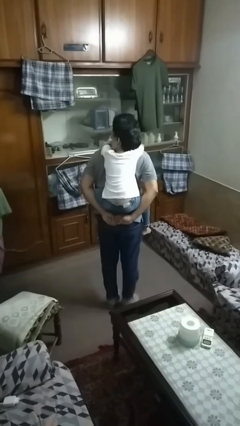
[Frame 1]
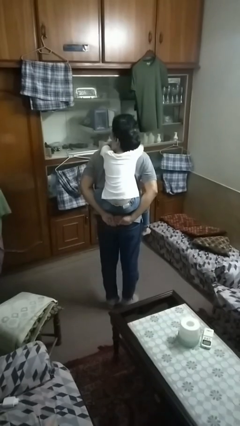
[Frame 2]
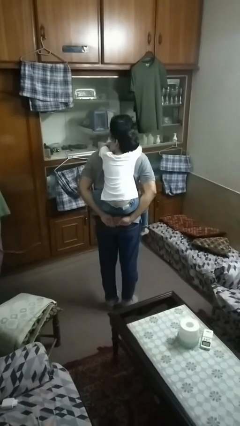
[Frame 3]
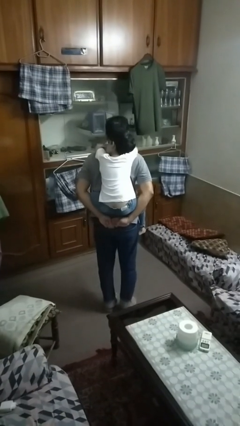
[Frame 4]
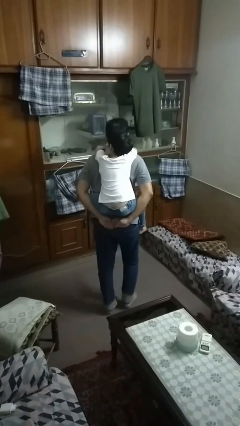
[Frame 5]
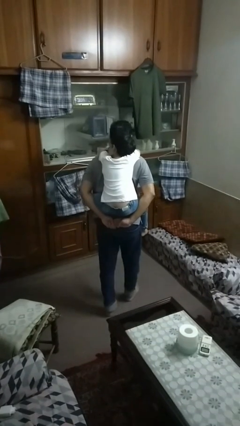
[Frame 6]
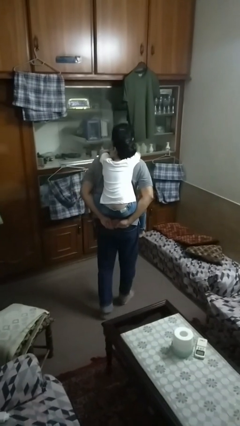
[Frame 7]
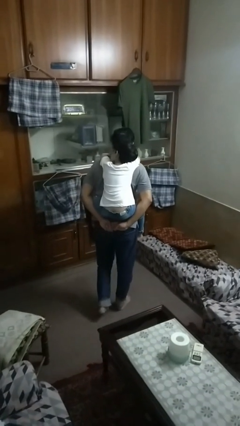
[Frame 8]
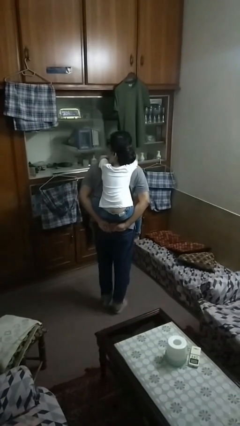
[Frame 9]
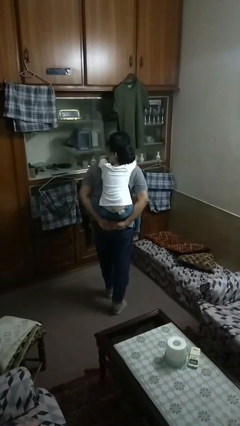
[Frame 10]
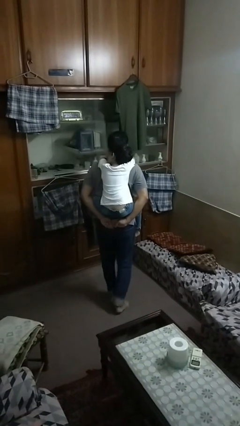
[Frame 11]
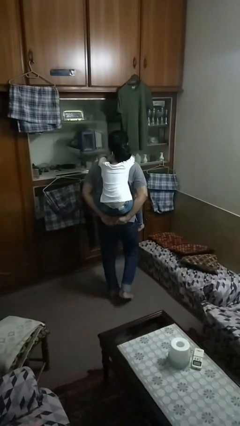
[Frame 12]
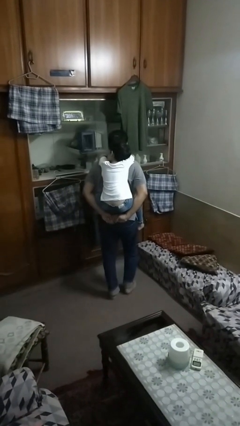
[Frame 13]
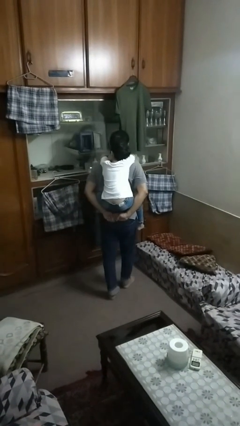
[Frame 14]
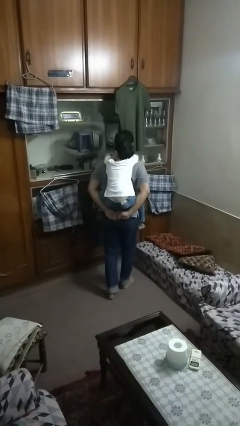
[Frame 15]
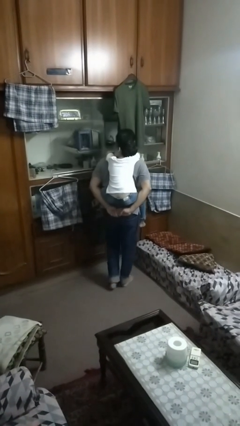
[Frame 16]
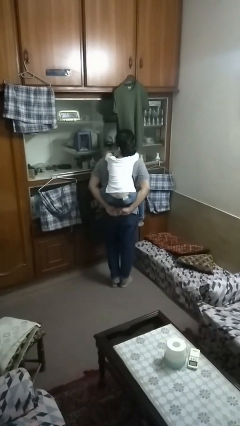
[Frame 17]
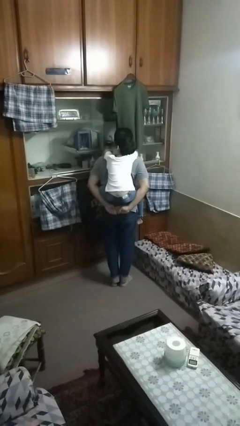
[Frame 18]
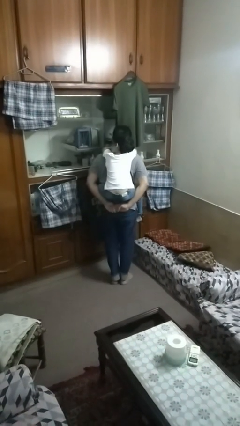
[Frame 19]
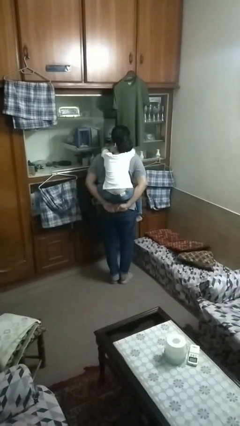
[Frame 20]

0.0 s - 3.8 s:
person carries person on back

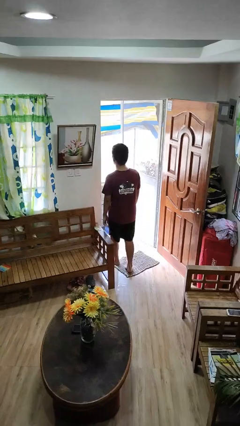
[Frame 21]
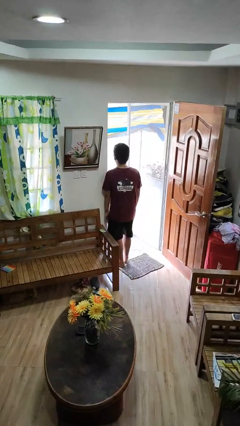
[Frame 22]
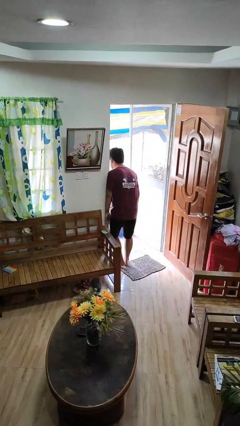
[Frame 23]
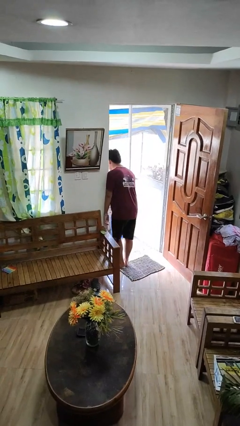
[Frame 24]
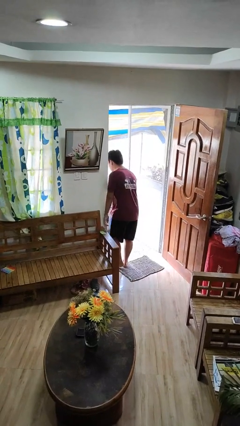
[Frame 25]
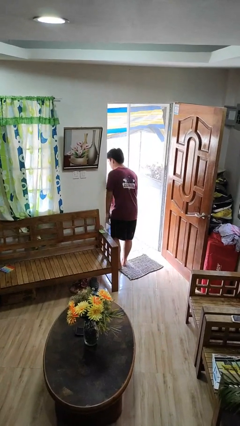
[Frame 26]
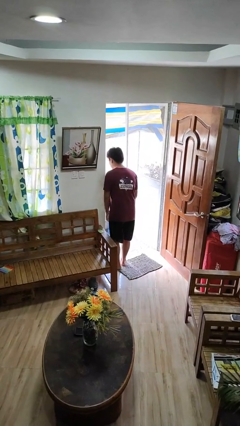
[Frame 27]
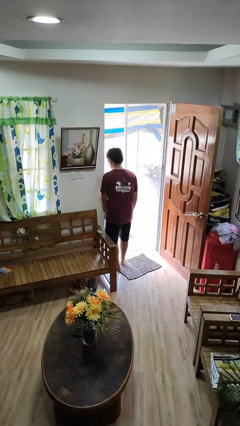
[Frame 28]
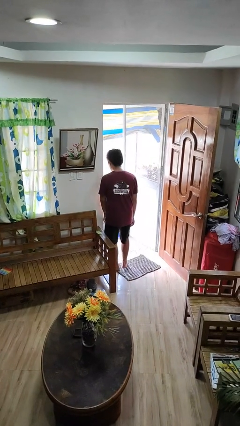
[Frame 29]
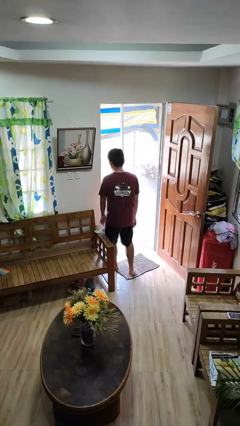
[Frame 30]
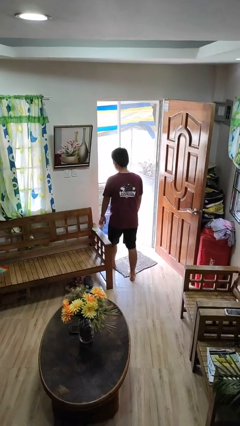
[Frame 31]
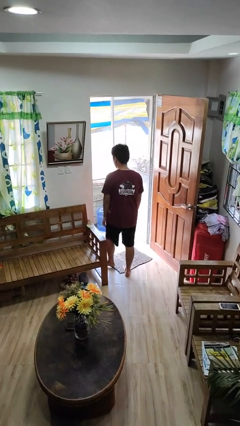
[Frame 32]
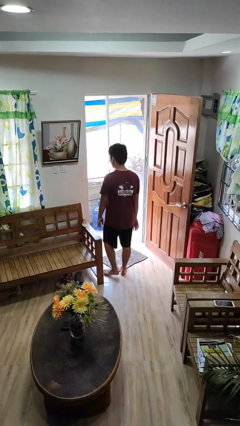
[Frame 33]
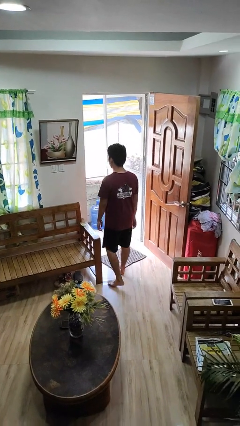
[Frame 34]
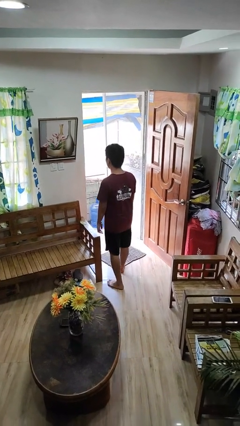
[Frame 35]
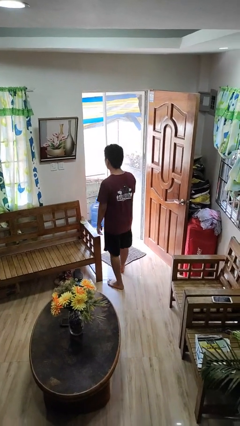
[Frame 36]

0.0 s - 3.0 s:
person bumps into wall

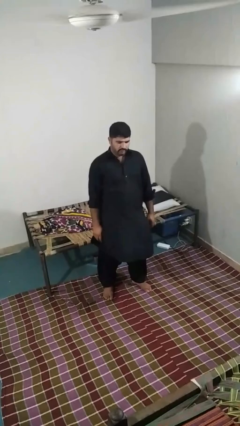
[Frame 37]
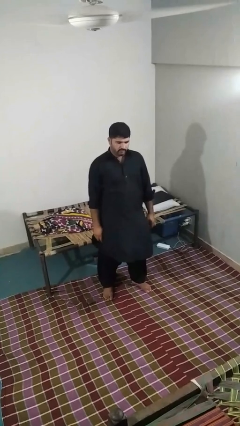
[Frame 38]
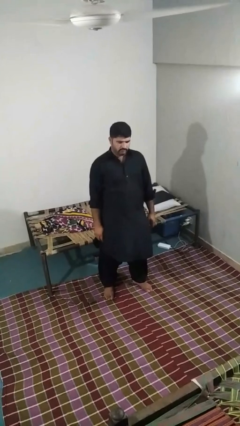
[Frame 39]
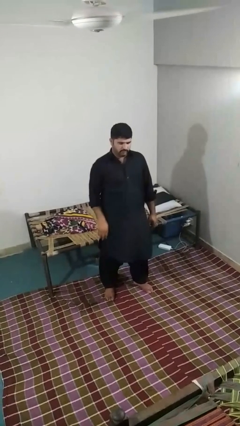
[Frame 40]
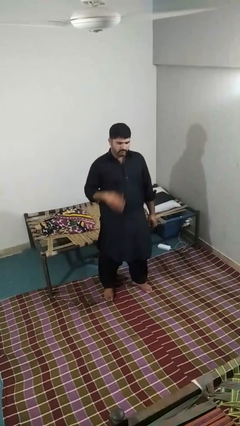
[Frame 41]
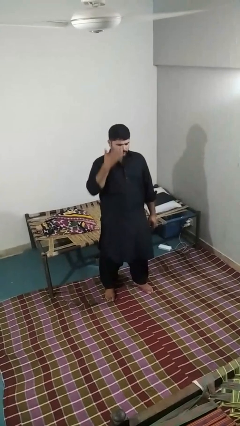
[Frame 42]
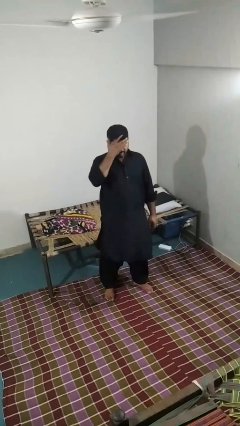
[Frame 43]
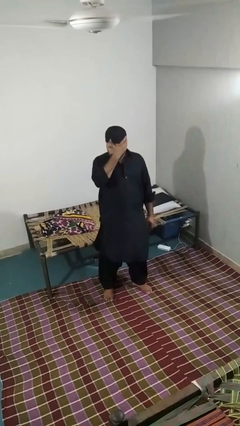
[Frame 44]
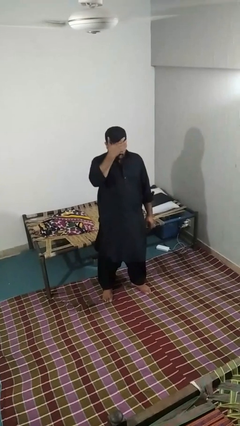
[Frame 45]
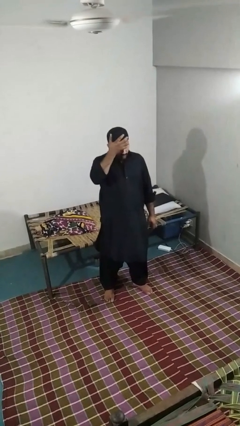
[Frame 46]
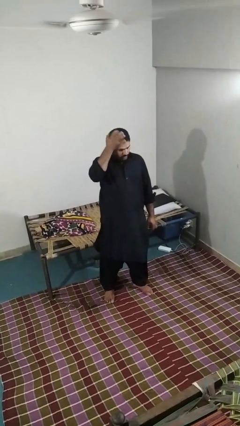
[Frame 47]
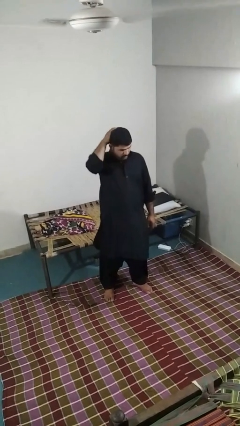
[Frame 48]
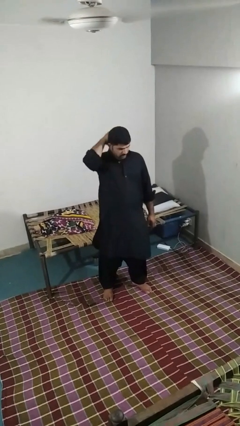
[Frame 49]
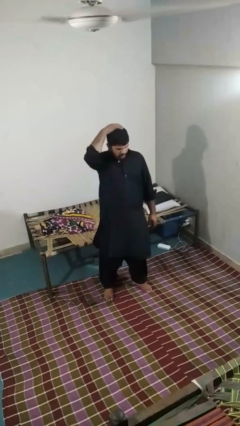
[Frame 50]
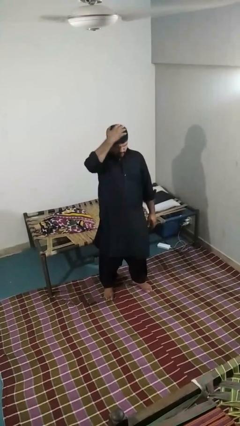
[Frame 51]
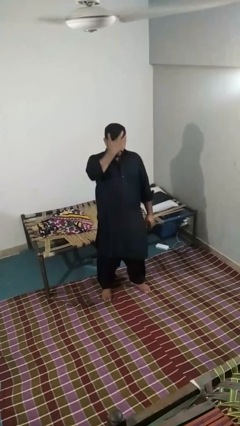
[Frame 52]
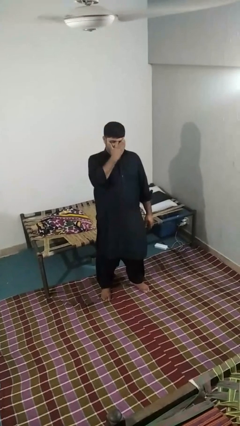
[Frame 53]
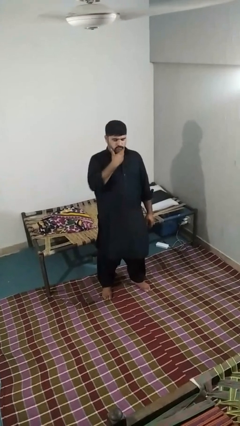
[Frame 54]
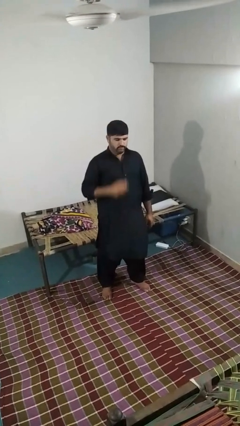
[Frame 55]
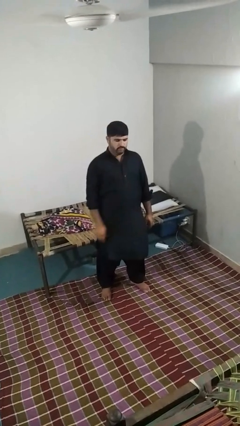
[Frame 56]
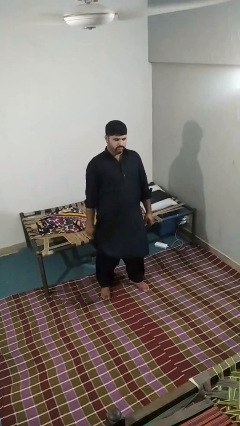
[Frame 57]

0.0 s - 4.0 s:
person scratches face

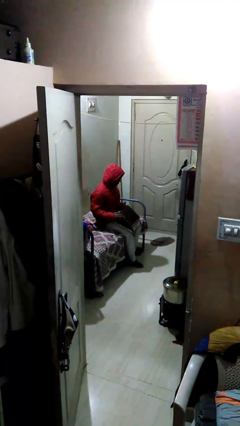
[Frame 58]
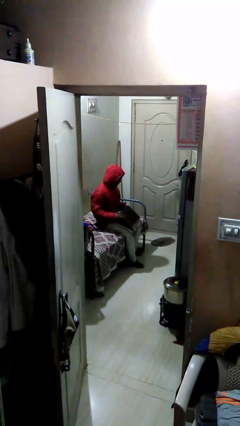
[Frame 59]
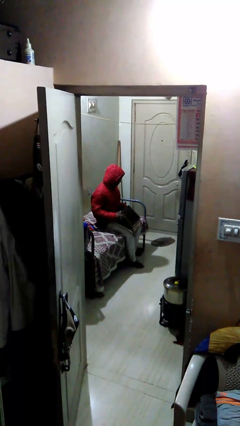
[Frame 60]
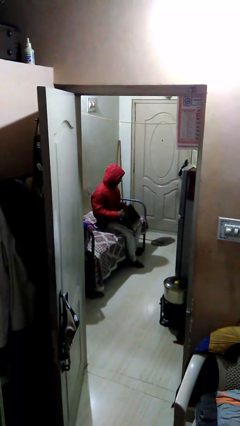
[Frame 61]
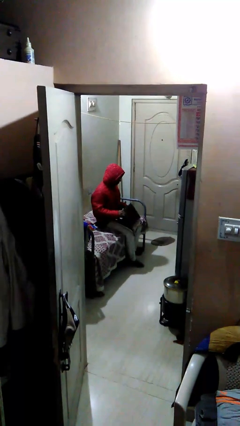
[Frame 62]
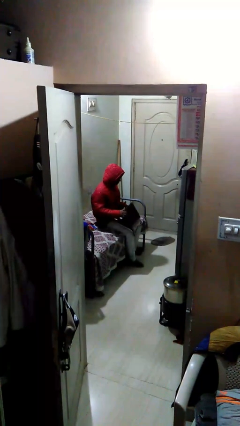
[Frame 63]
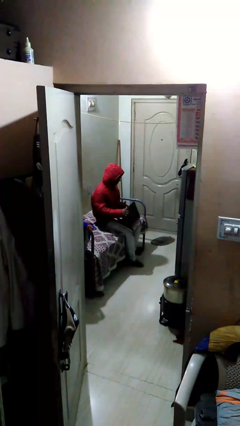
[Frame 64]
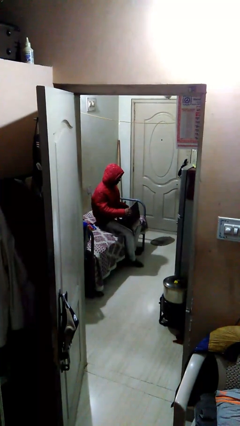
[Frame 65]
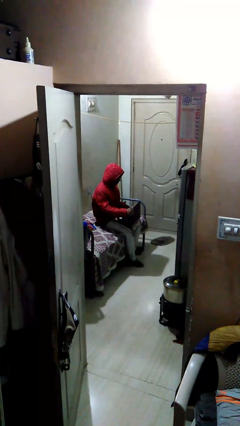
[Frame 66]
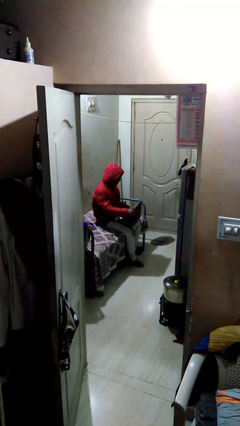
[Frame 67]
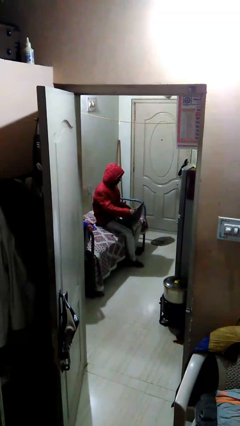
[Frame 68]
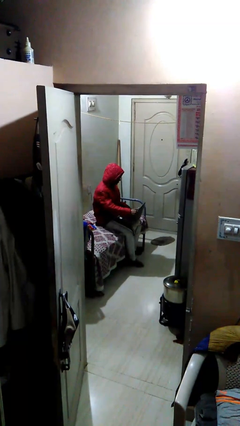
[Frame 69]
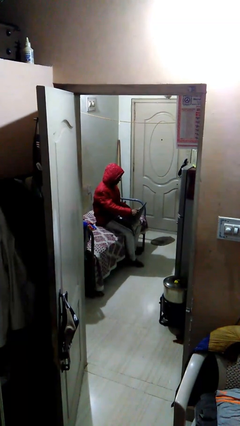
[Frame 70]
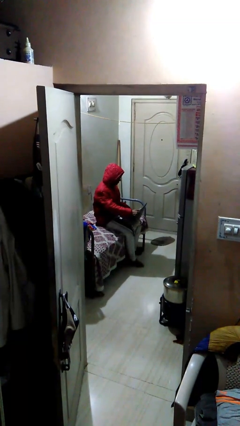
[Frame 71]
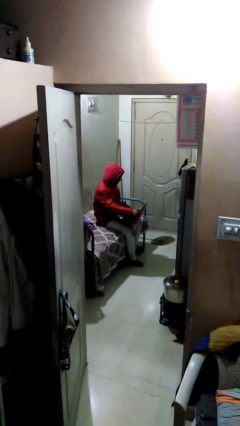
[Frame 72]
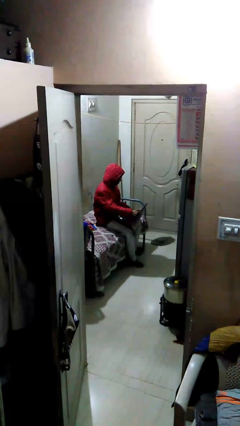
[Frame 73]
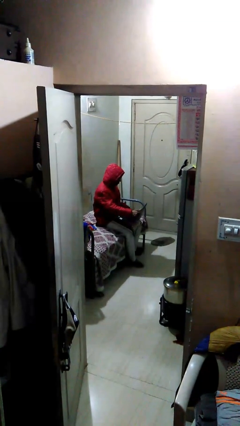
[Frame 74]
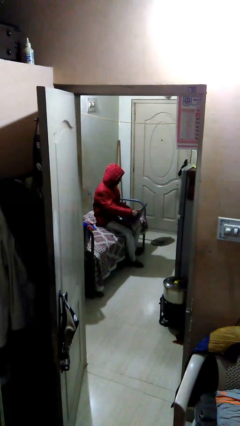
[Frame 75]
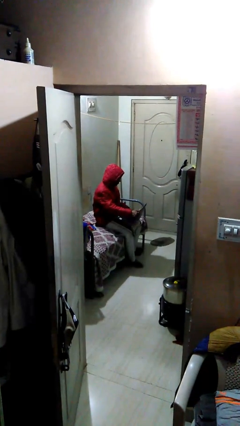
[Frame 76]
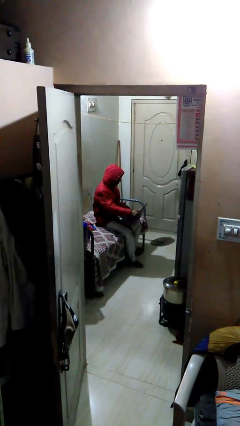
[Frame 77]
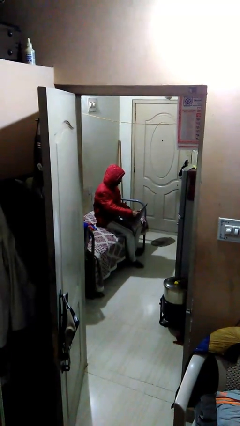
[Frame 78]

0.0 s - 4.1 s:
person interacts with laptop

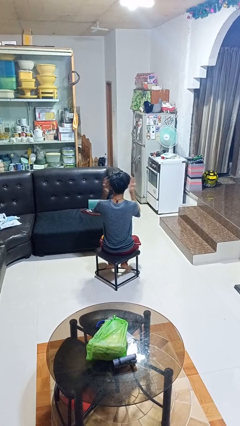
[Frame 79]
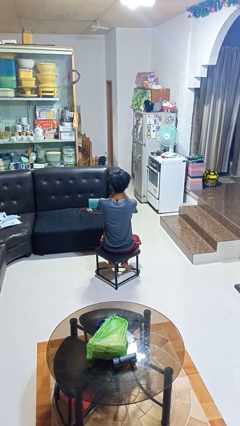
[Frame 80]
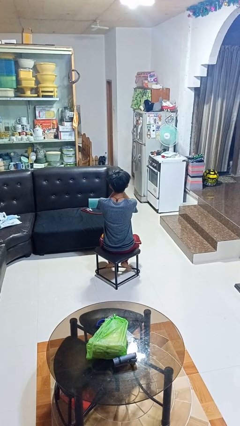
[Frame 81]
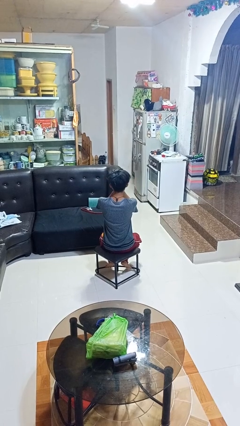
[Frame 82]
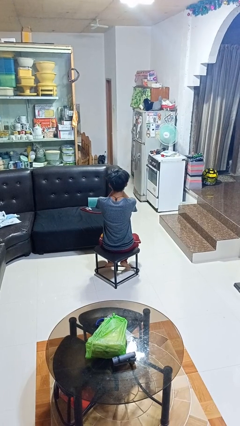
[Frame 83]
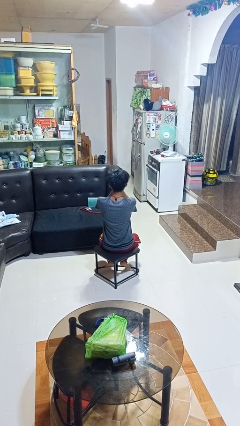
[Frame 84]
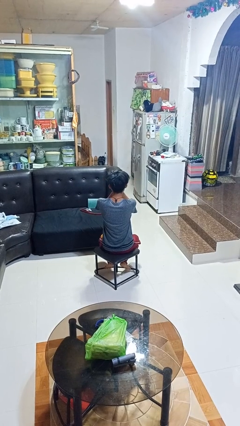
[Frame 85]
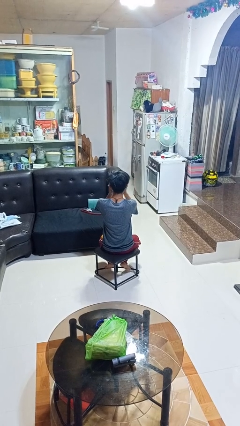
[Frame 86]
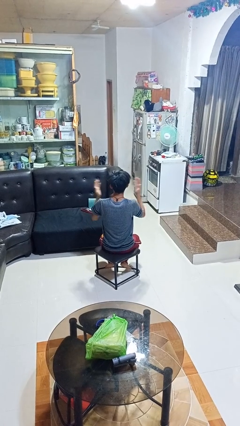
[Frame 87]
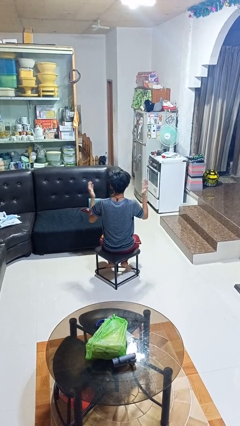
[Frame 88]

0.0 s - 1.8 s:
person covers face with hands

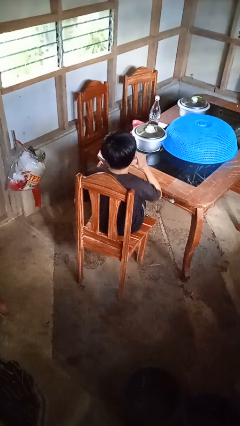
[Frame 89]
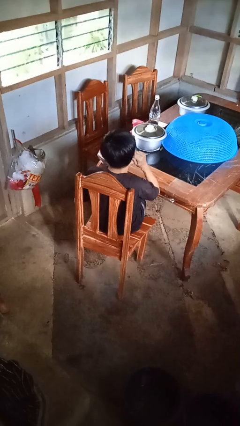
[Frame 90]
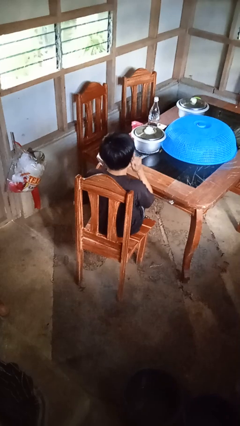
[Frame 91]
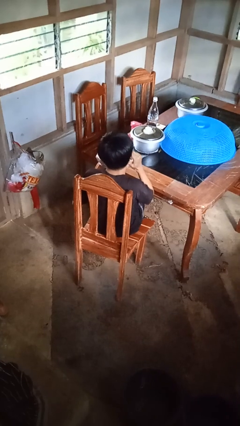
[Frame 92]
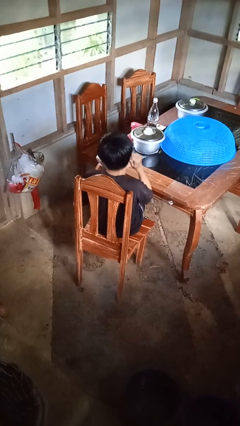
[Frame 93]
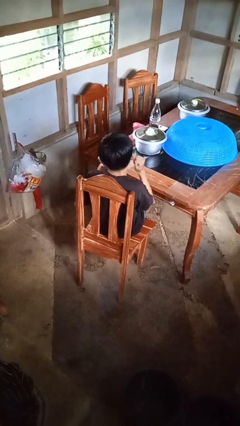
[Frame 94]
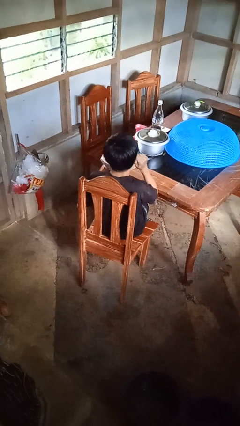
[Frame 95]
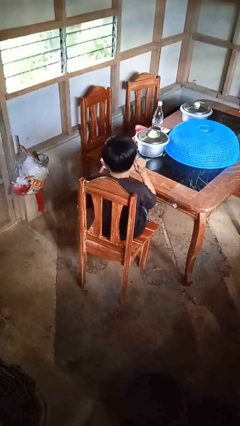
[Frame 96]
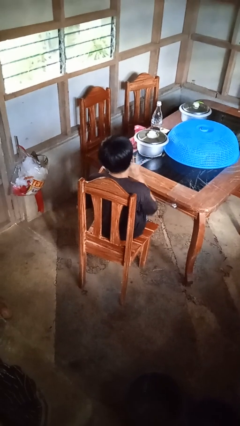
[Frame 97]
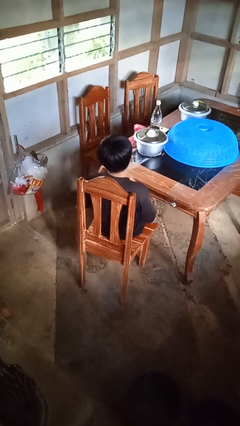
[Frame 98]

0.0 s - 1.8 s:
person touches earlobe
